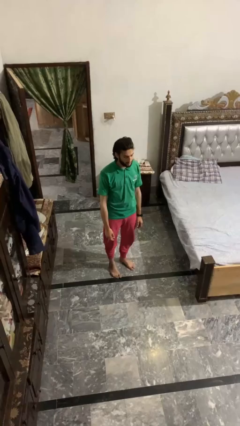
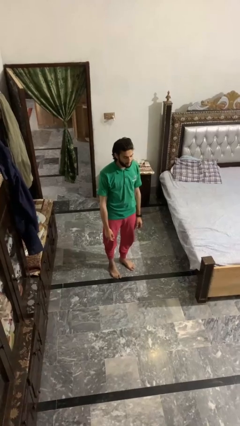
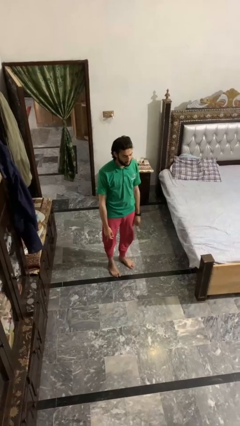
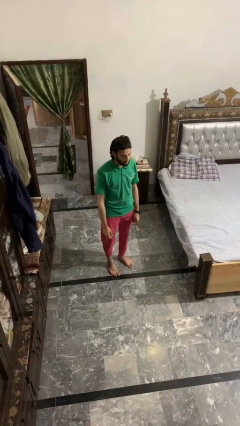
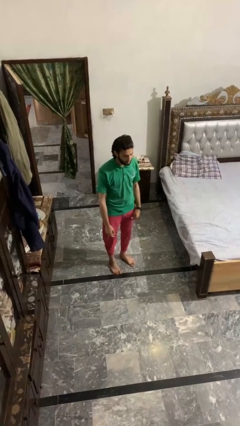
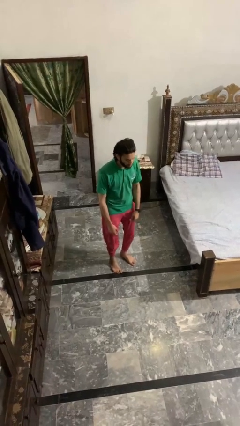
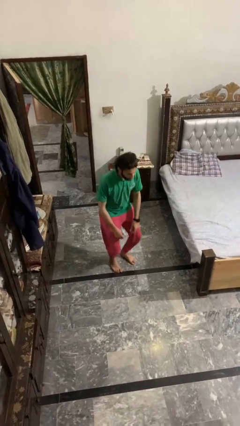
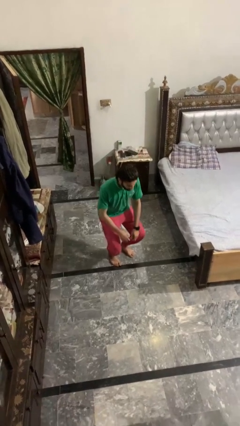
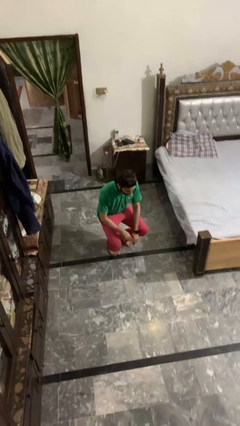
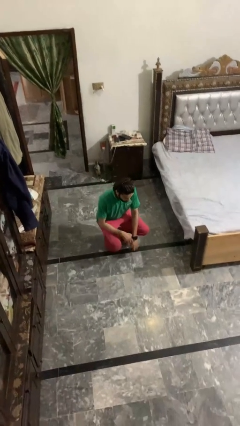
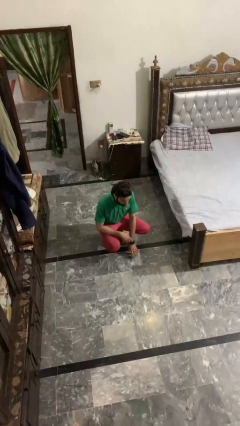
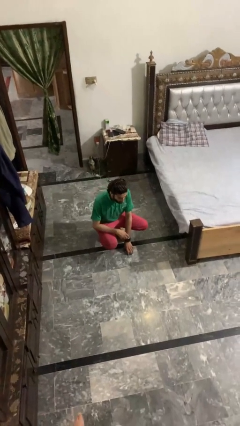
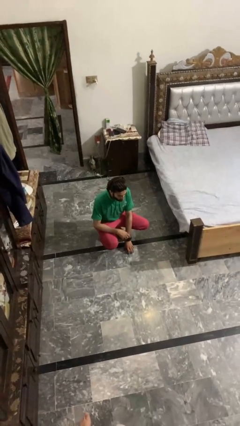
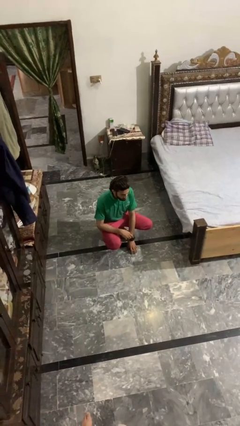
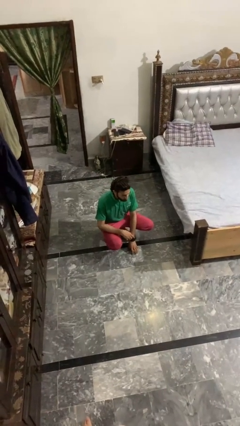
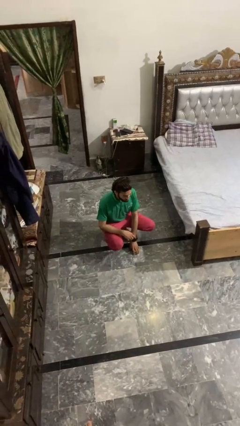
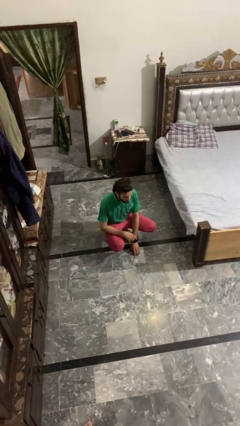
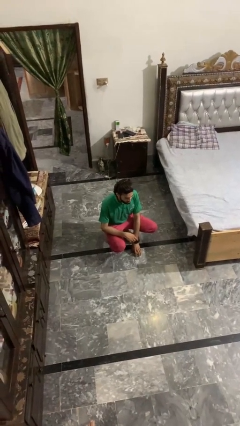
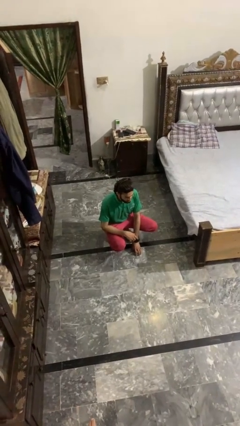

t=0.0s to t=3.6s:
person squats

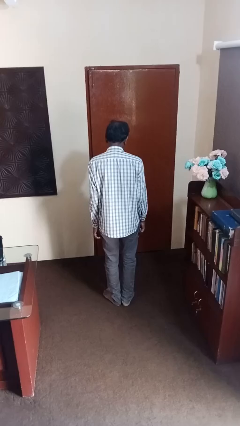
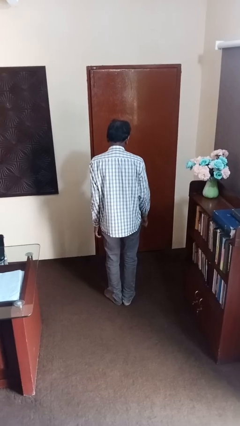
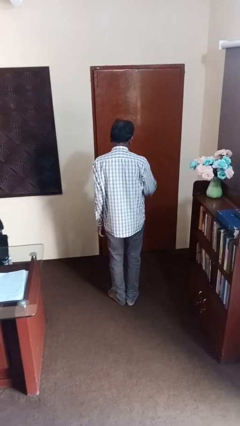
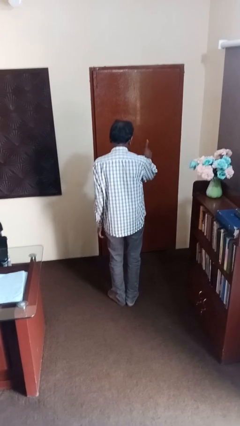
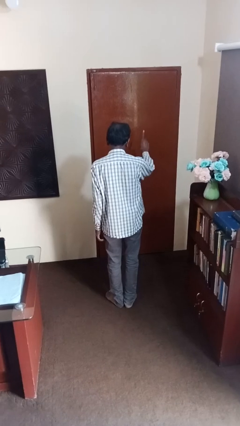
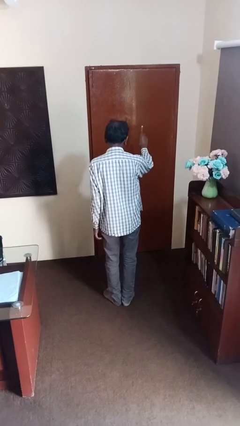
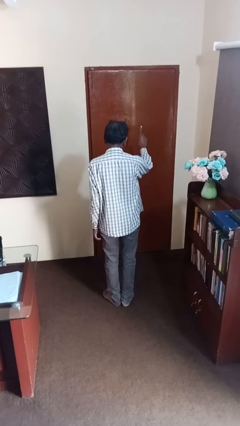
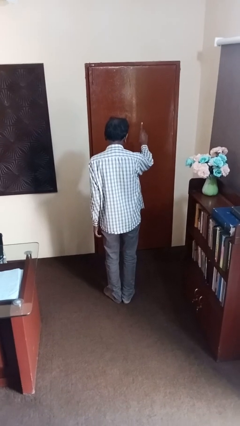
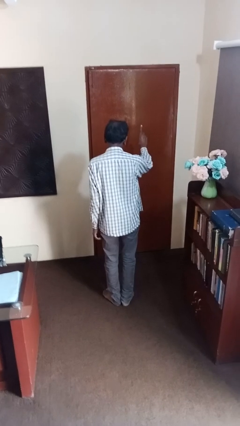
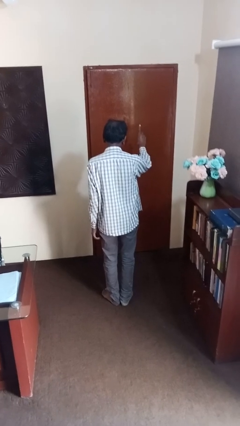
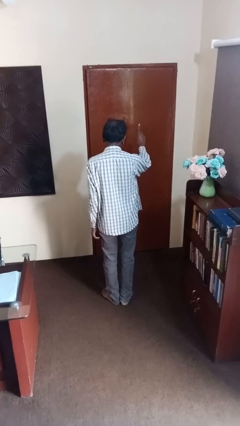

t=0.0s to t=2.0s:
person gestures number one

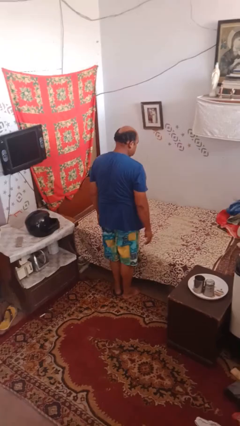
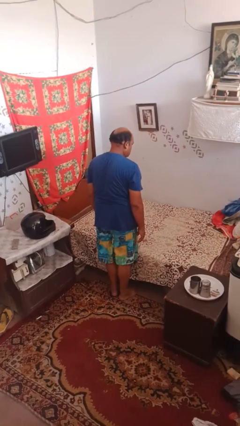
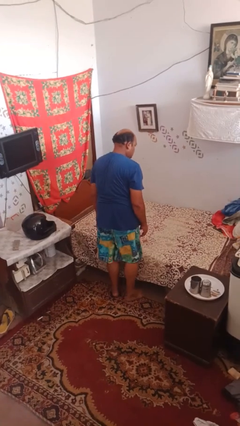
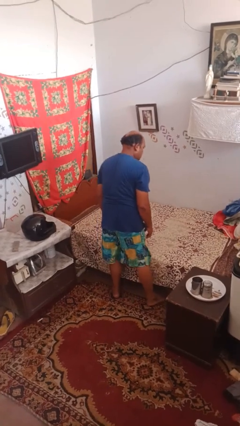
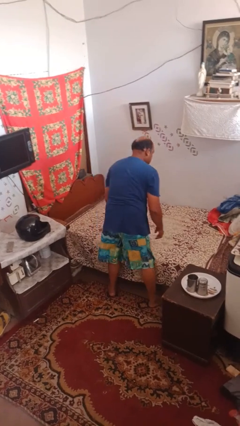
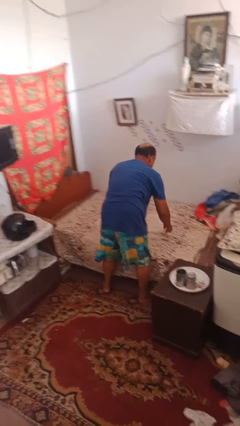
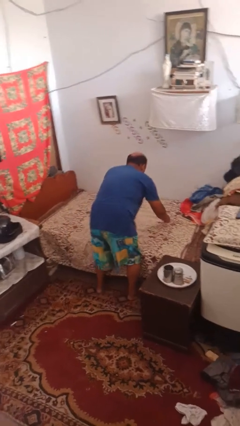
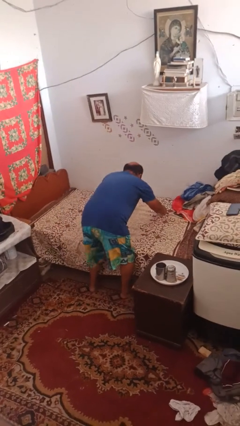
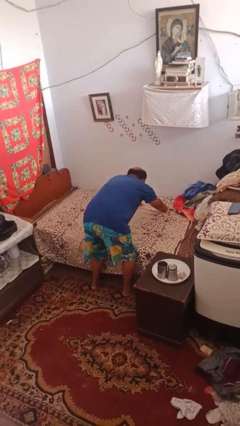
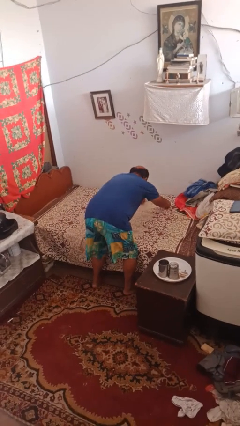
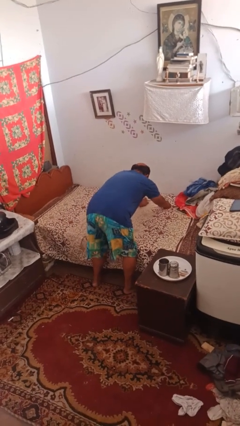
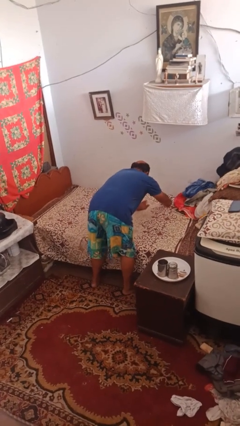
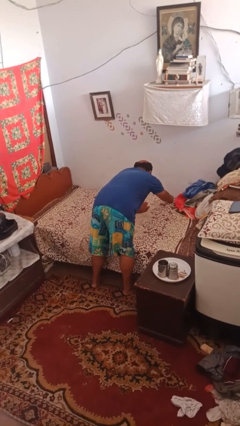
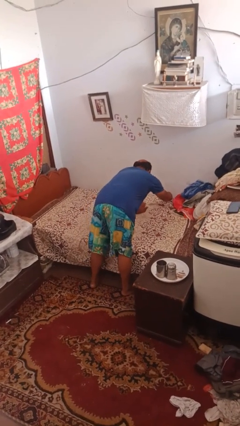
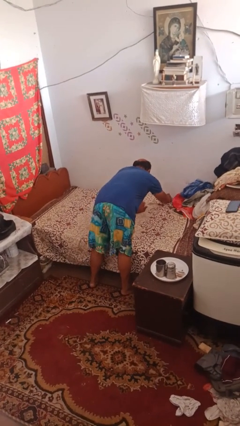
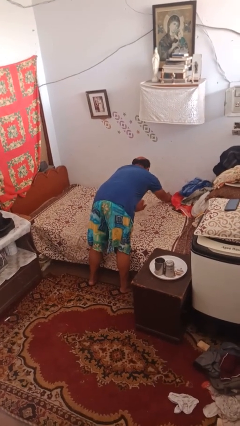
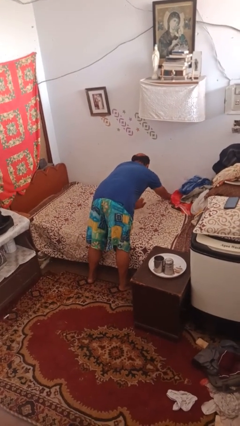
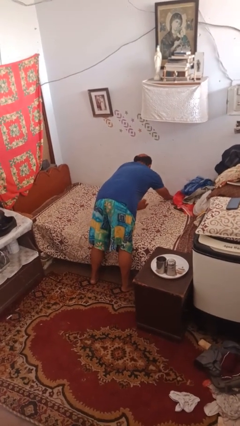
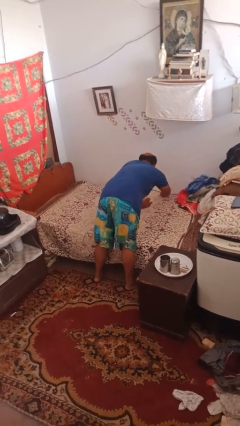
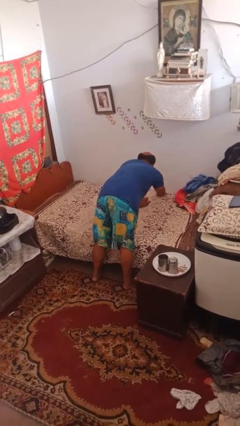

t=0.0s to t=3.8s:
person makes bed

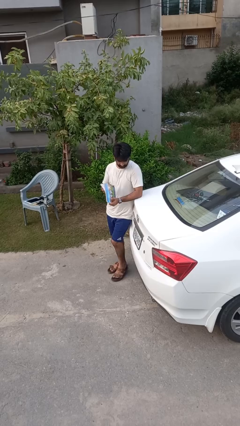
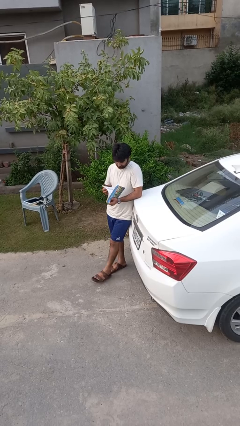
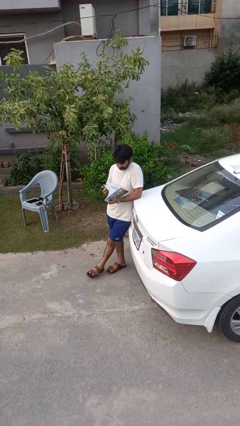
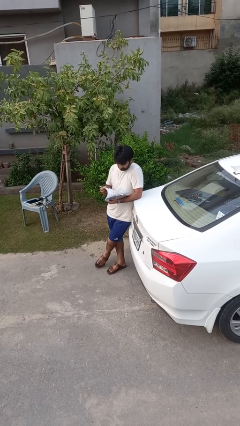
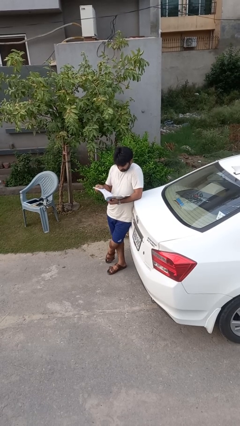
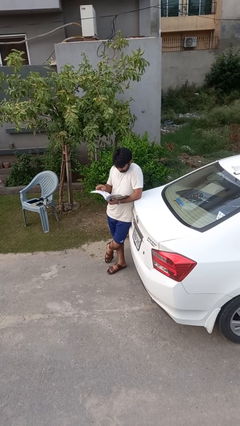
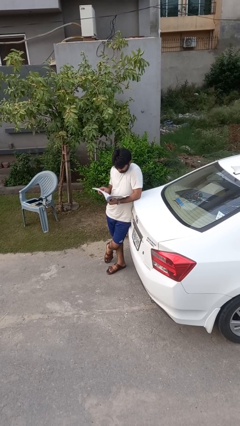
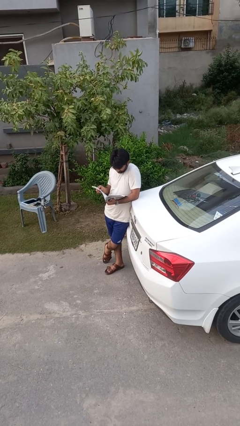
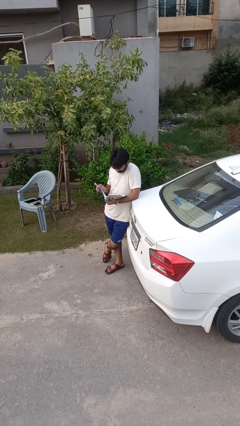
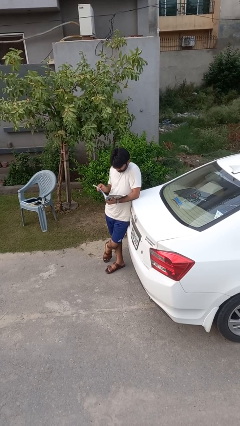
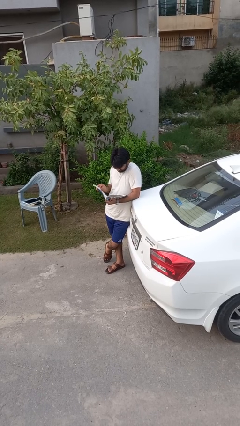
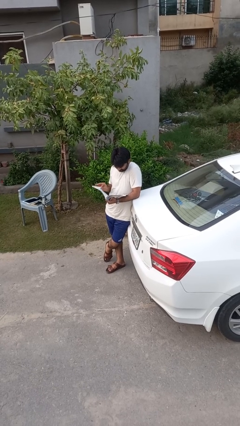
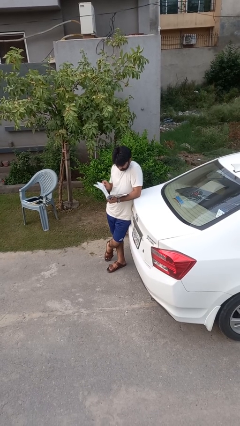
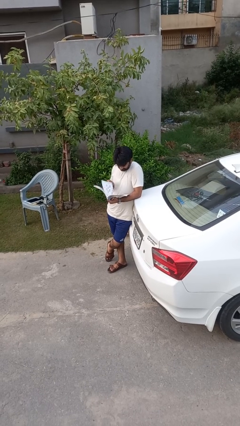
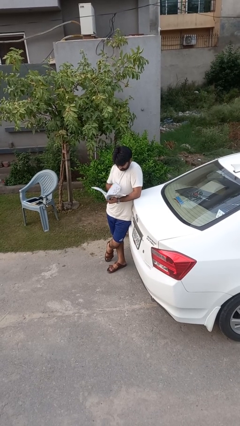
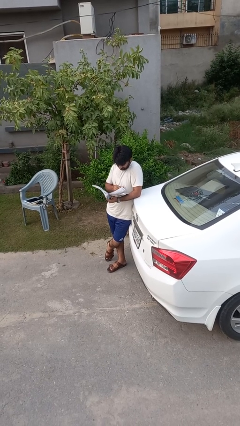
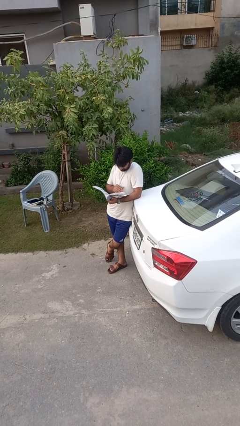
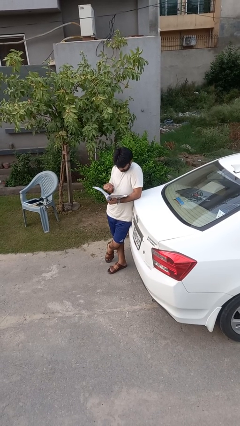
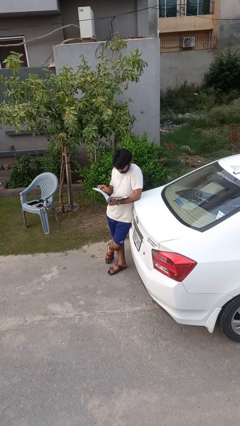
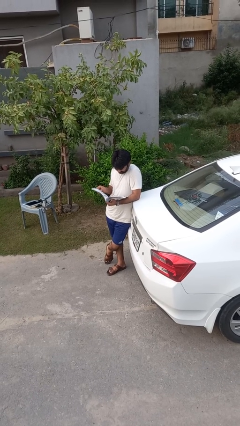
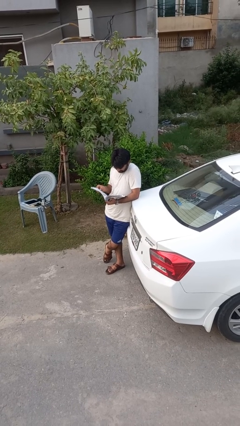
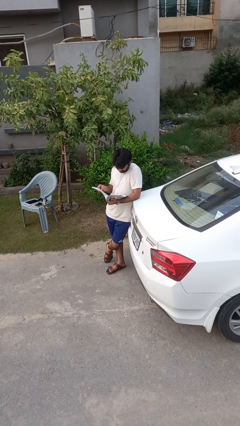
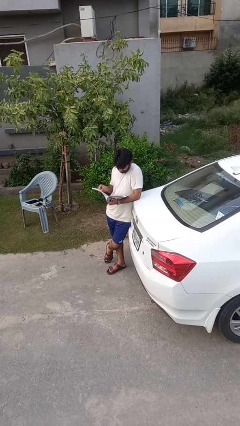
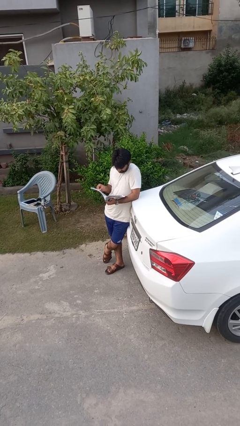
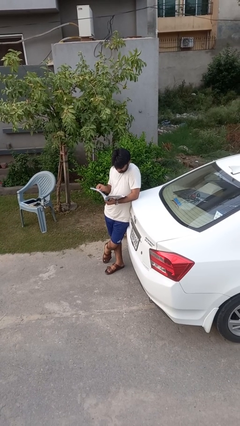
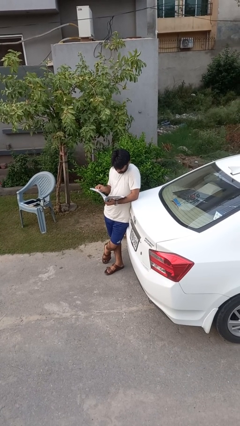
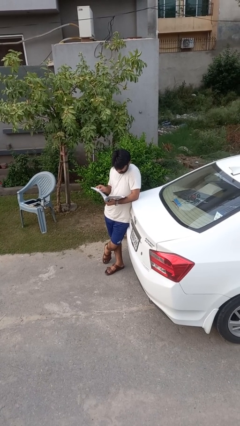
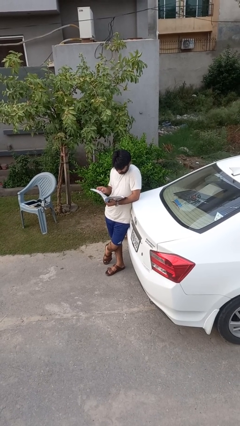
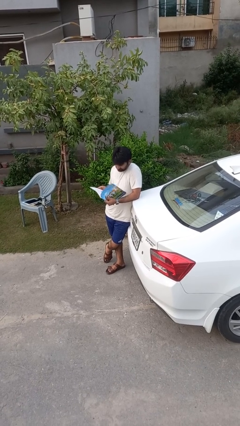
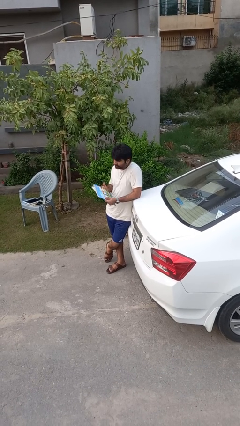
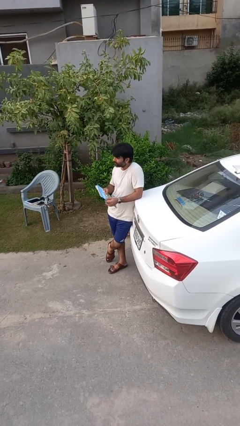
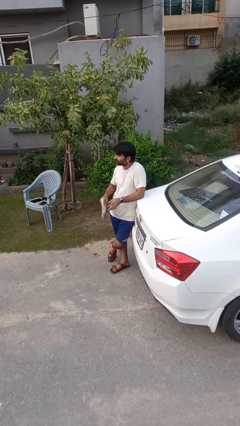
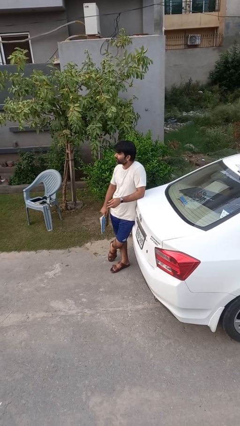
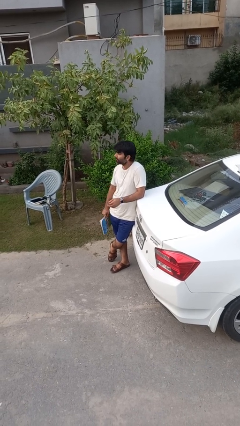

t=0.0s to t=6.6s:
person reads book

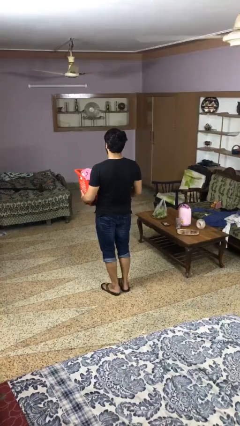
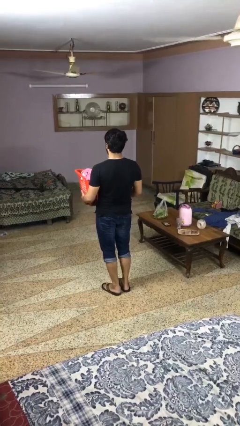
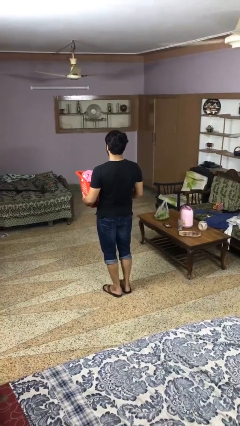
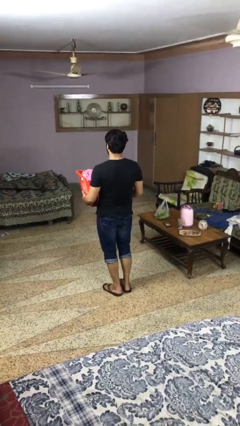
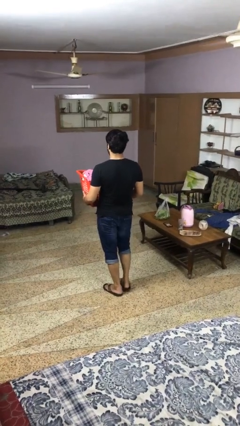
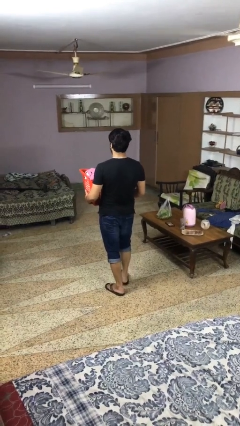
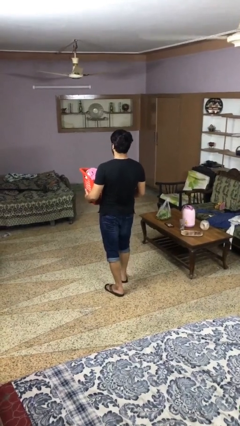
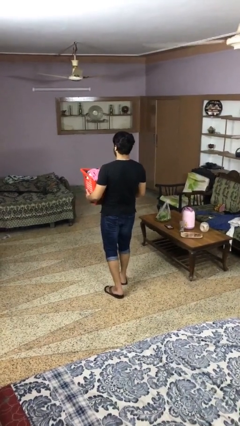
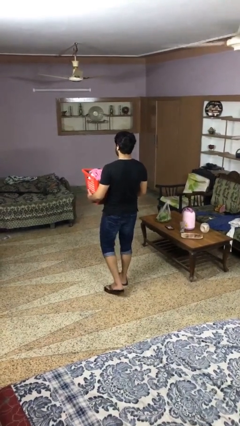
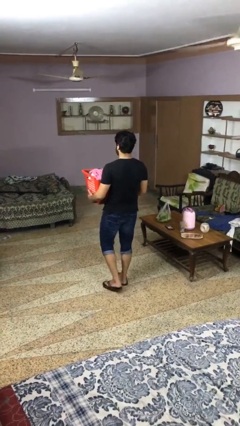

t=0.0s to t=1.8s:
person carries laundry basket
